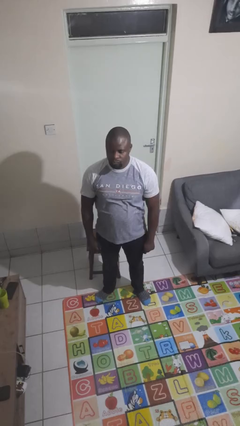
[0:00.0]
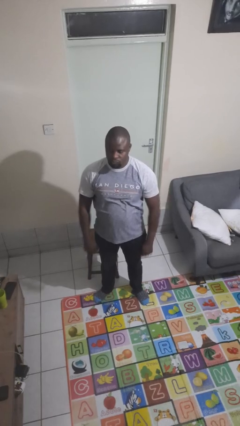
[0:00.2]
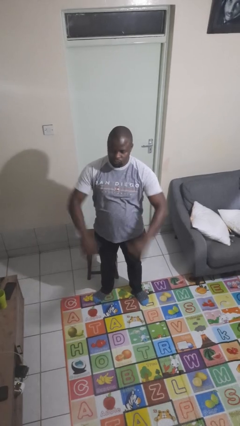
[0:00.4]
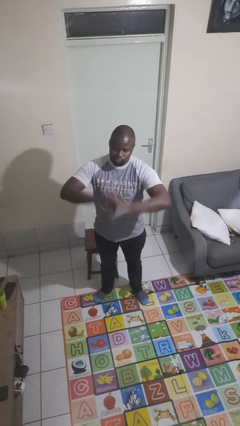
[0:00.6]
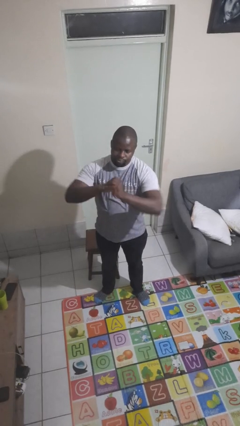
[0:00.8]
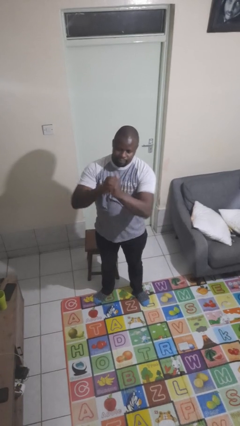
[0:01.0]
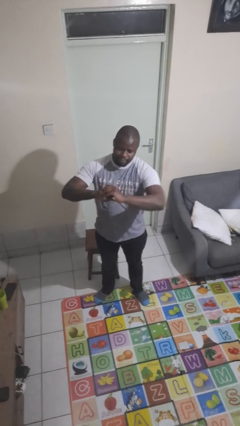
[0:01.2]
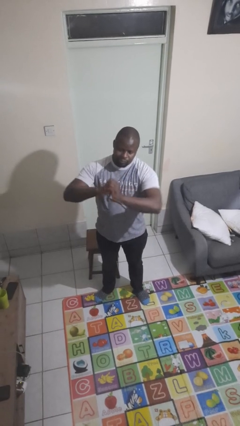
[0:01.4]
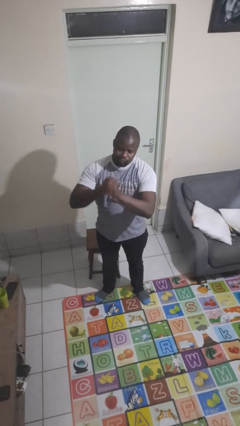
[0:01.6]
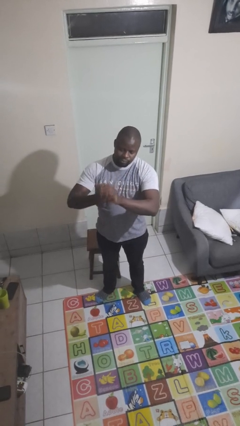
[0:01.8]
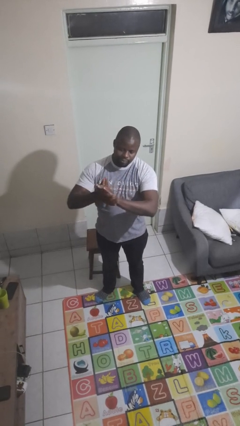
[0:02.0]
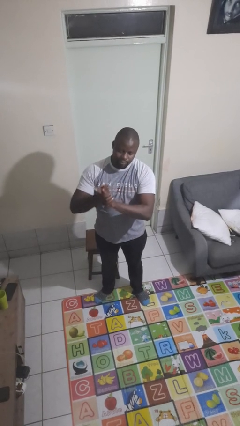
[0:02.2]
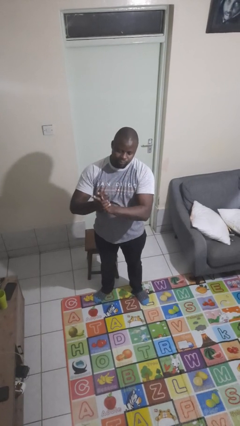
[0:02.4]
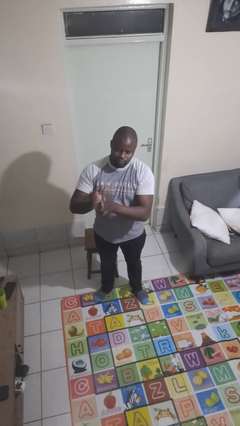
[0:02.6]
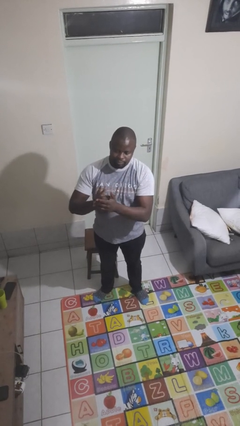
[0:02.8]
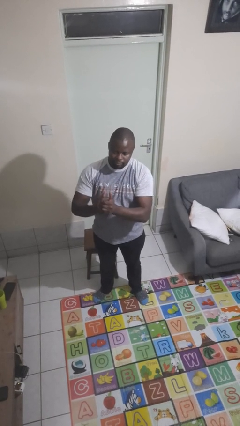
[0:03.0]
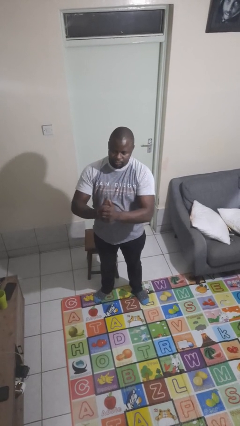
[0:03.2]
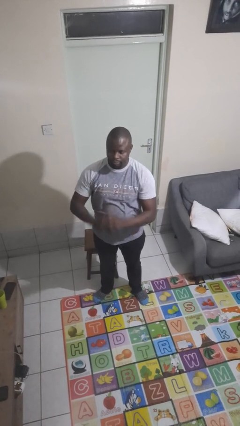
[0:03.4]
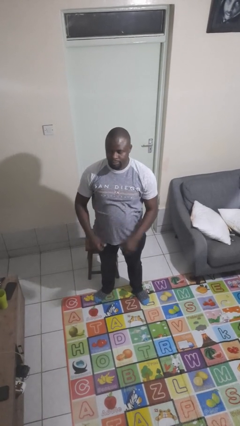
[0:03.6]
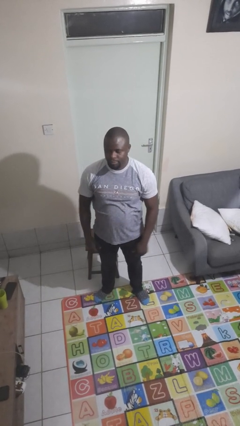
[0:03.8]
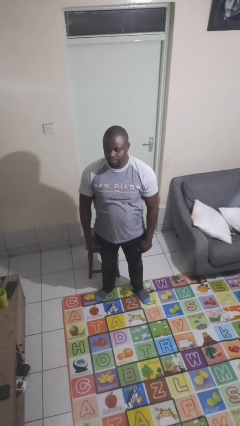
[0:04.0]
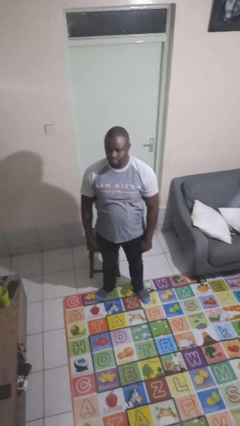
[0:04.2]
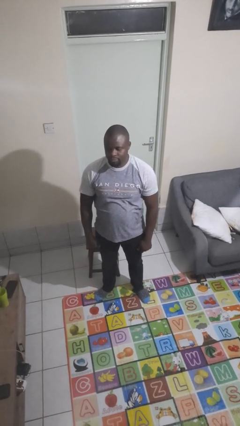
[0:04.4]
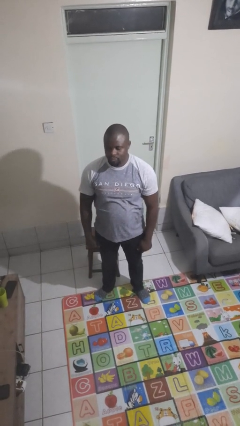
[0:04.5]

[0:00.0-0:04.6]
person cracks knuckles

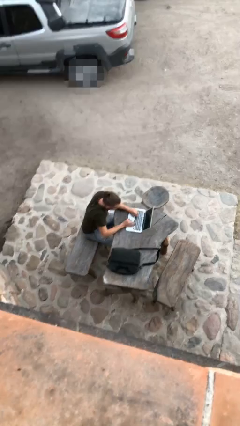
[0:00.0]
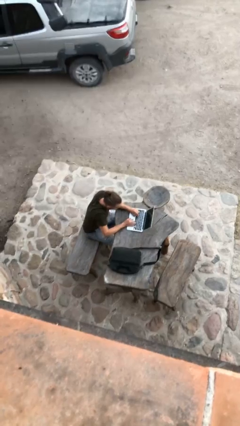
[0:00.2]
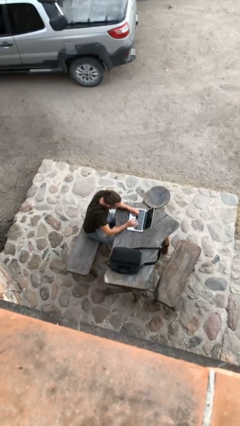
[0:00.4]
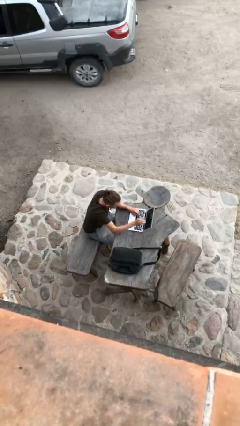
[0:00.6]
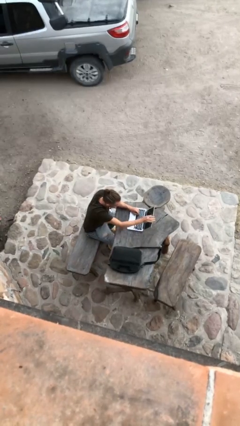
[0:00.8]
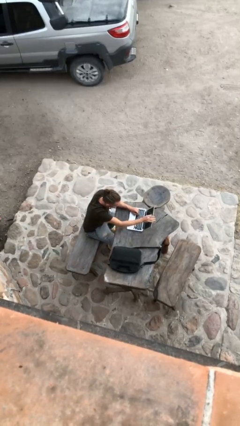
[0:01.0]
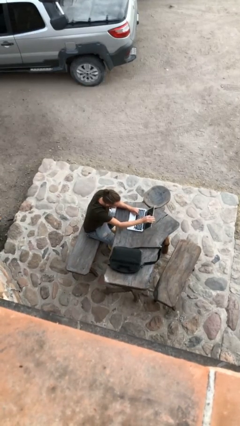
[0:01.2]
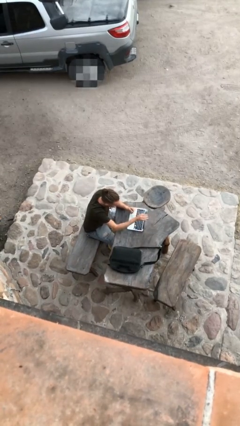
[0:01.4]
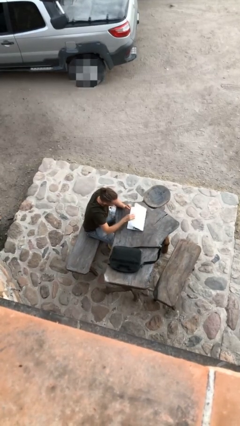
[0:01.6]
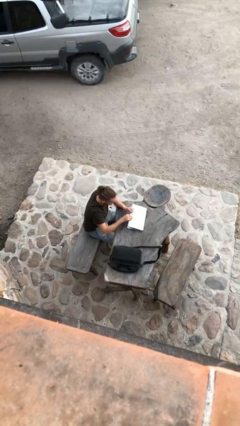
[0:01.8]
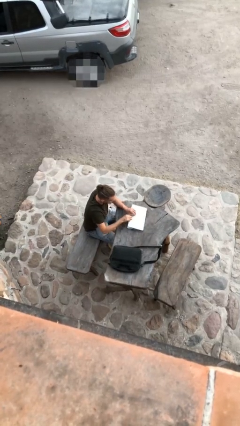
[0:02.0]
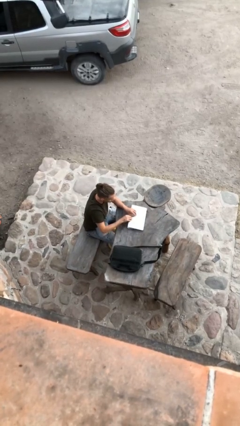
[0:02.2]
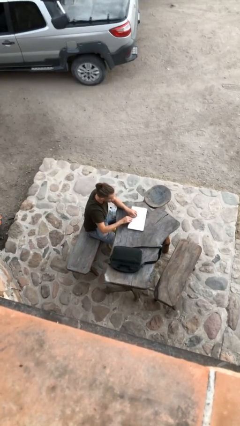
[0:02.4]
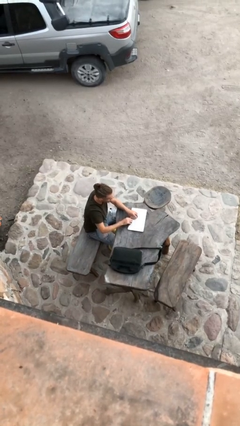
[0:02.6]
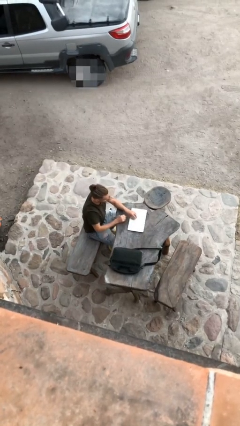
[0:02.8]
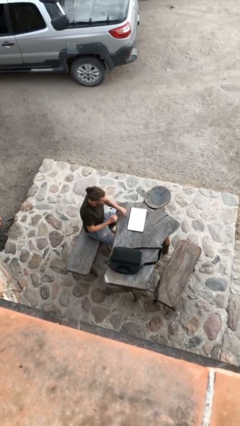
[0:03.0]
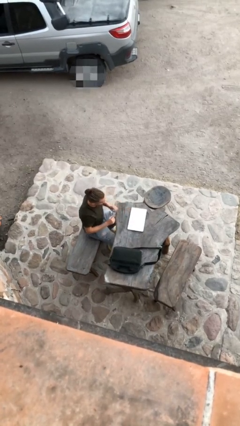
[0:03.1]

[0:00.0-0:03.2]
person interacts with laptop

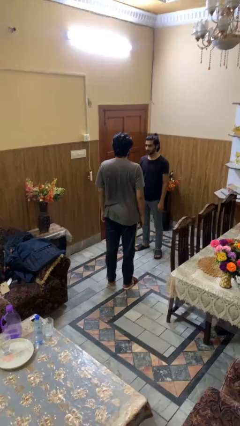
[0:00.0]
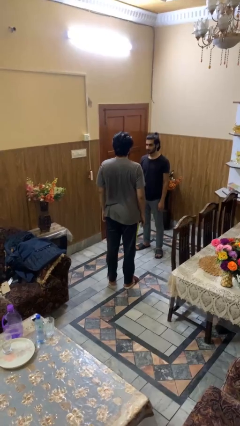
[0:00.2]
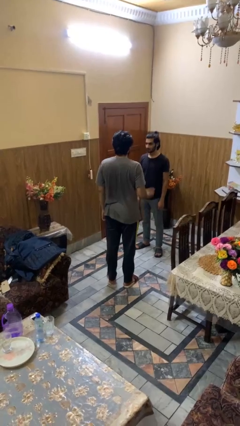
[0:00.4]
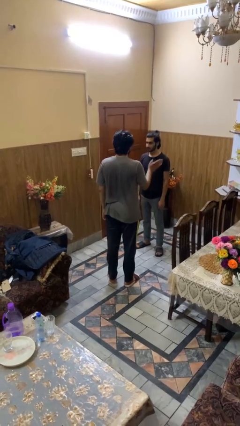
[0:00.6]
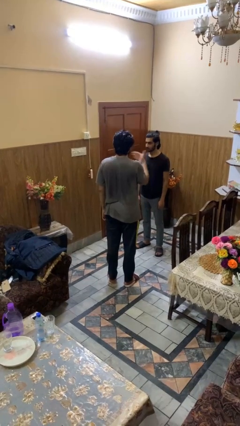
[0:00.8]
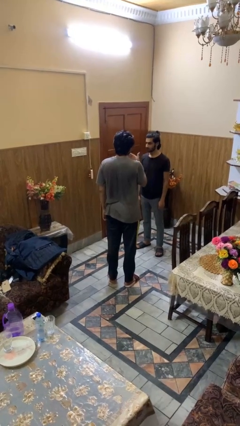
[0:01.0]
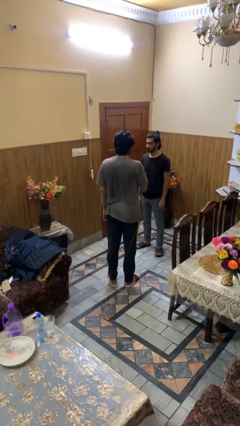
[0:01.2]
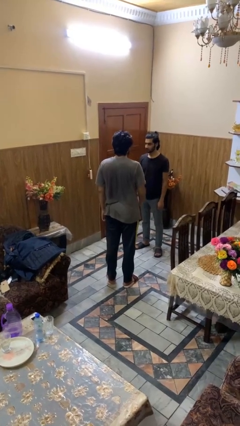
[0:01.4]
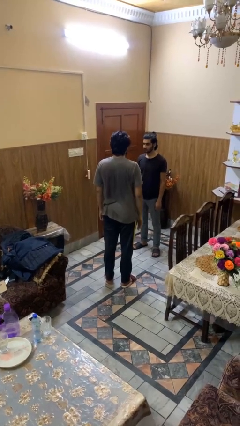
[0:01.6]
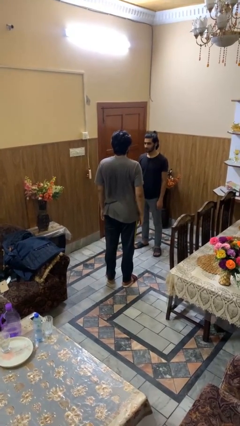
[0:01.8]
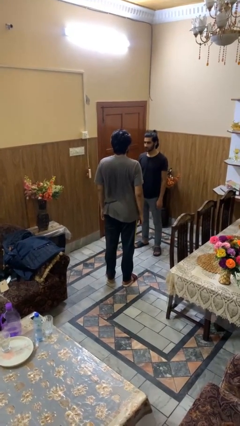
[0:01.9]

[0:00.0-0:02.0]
person shoves person

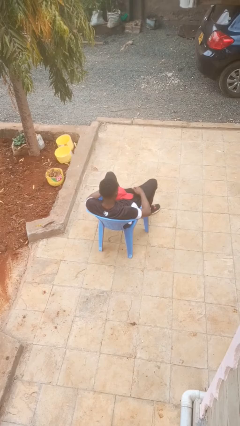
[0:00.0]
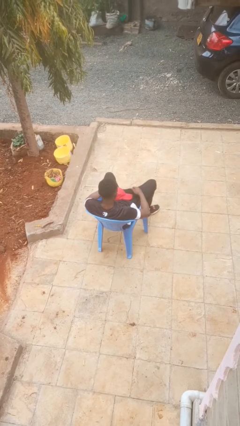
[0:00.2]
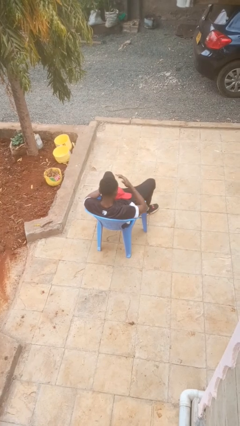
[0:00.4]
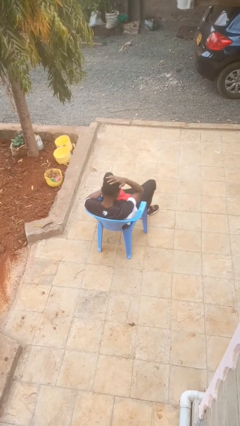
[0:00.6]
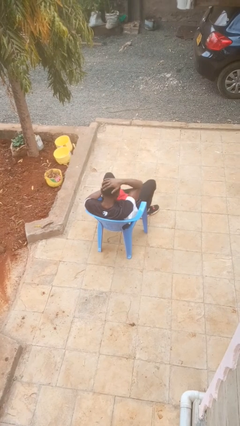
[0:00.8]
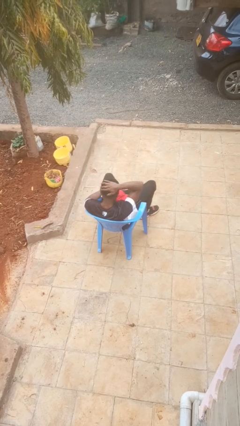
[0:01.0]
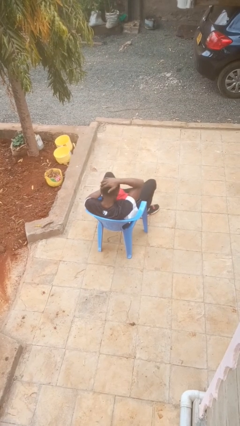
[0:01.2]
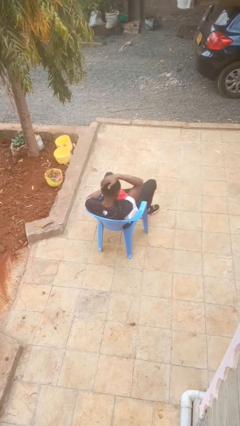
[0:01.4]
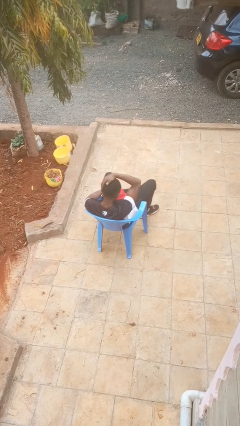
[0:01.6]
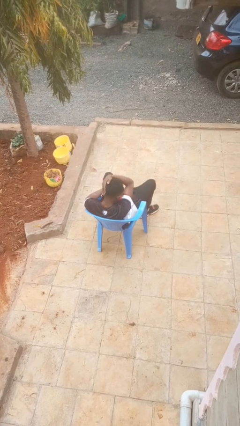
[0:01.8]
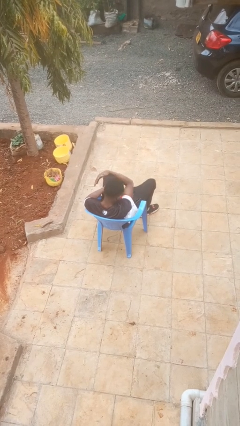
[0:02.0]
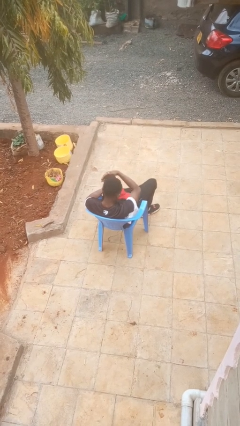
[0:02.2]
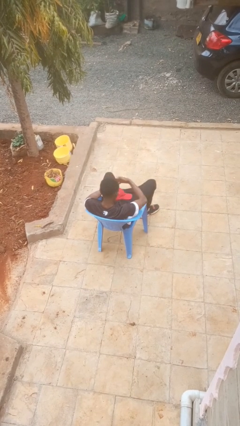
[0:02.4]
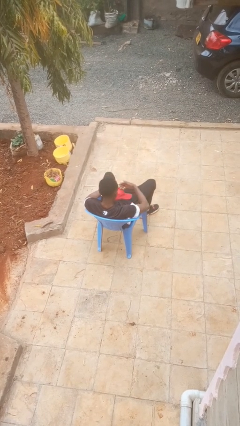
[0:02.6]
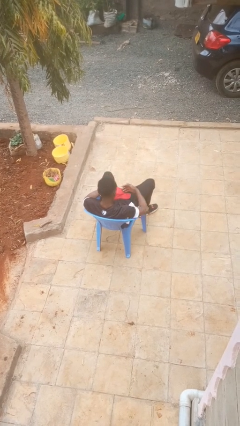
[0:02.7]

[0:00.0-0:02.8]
person strokes hair

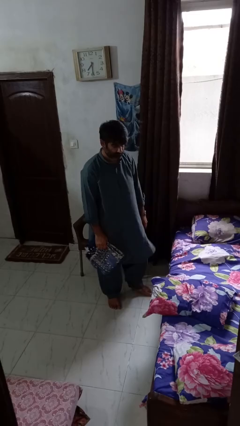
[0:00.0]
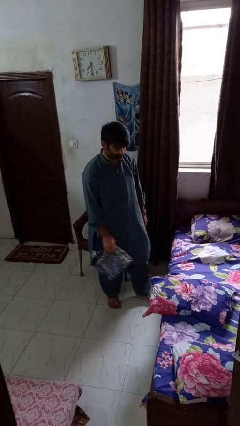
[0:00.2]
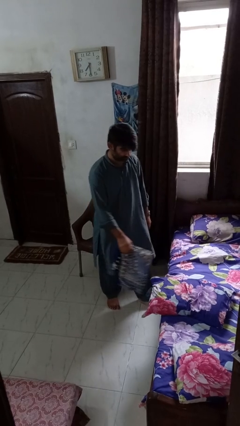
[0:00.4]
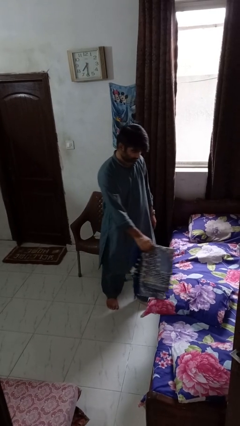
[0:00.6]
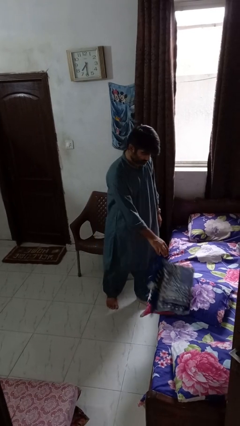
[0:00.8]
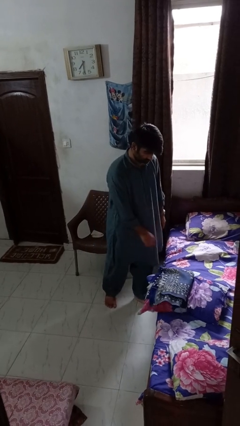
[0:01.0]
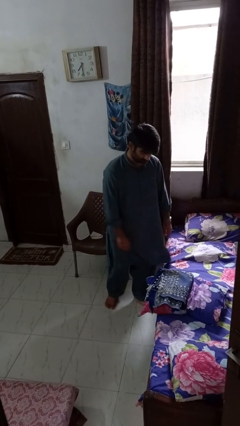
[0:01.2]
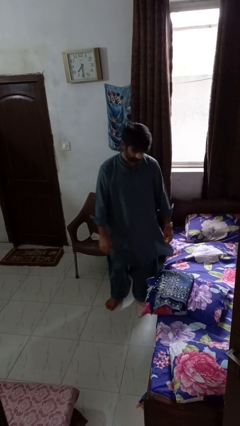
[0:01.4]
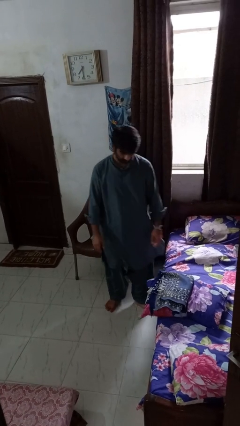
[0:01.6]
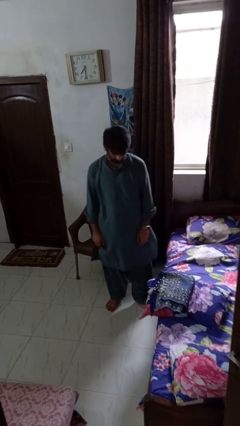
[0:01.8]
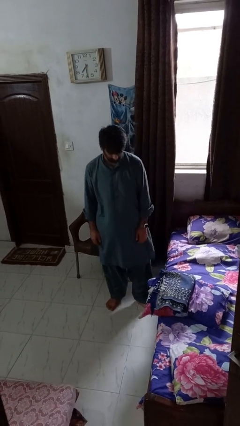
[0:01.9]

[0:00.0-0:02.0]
person puts down object on bed

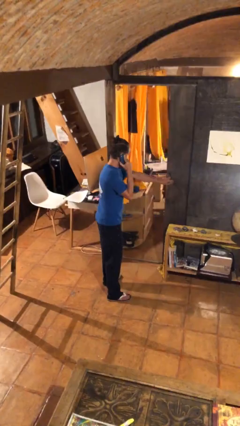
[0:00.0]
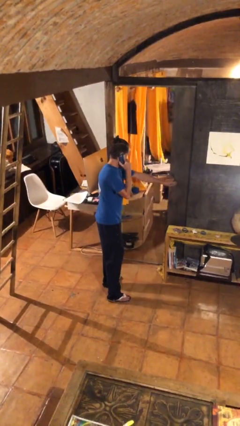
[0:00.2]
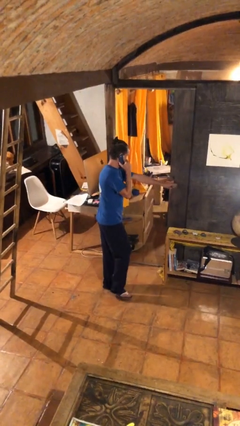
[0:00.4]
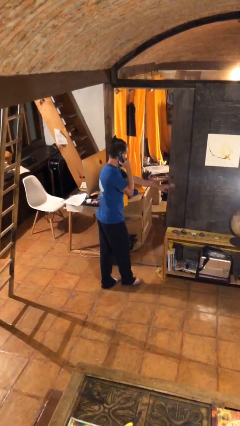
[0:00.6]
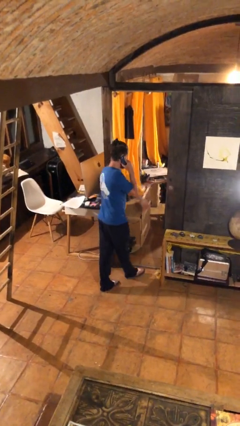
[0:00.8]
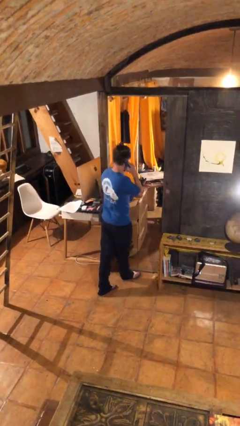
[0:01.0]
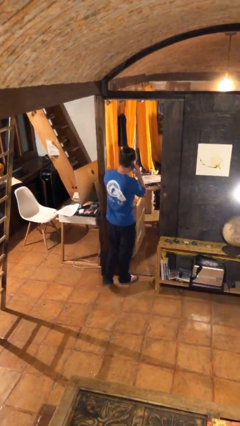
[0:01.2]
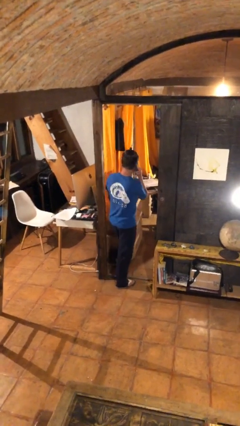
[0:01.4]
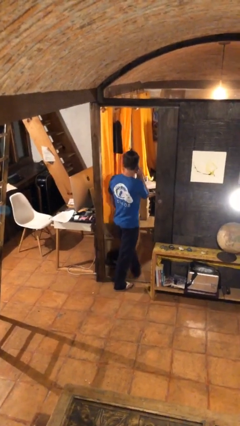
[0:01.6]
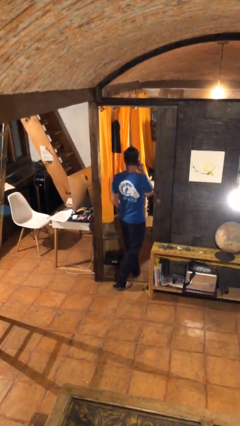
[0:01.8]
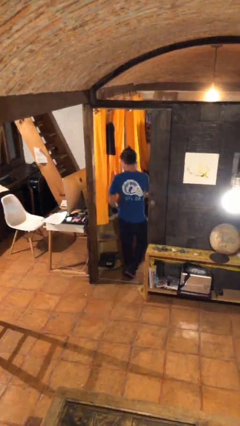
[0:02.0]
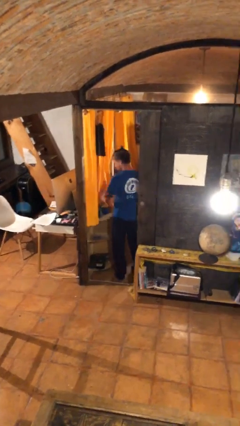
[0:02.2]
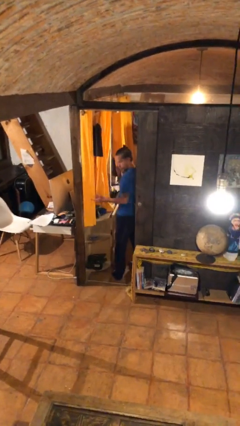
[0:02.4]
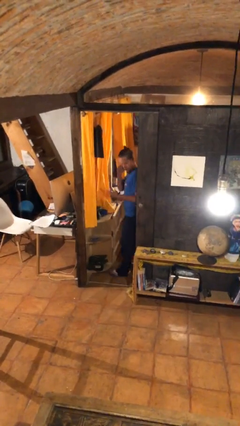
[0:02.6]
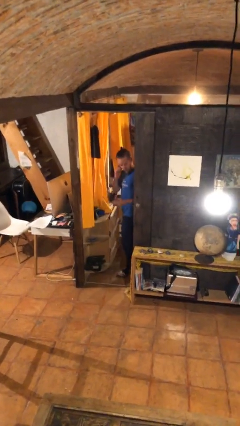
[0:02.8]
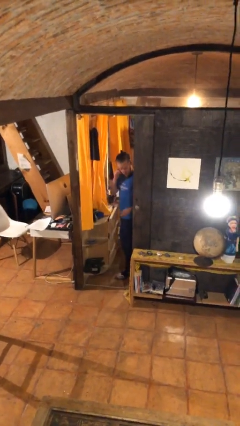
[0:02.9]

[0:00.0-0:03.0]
person exits scene through structure

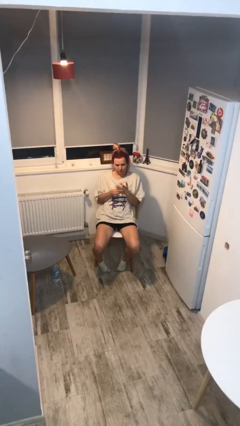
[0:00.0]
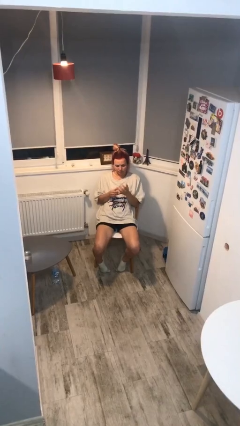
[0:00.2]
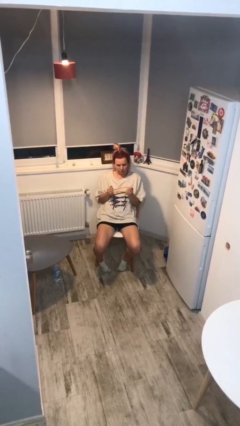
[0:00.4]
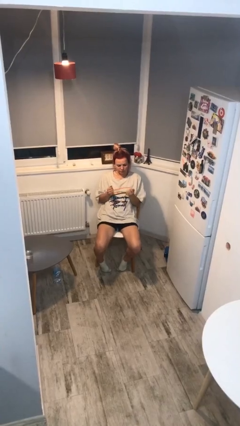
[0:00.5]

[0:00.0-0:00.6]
person puts on ring
